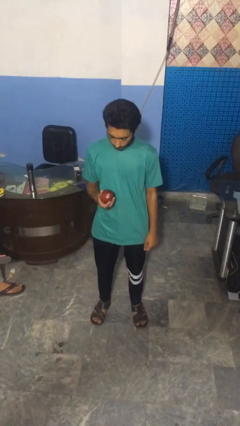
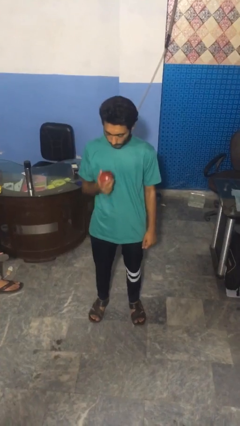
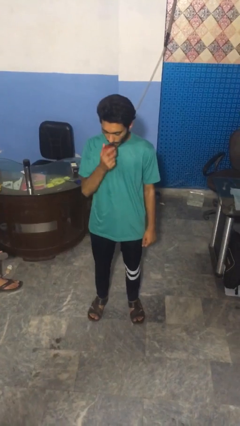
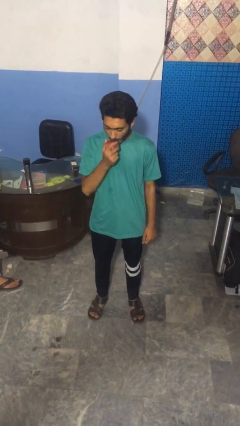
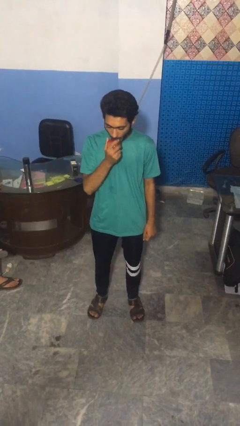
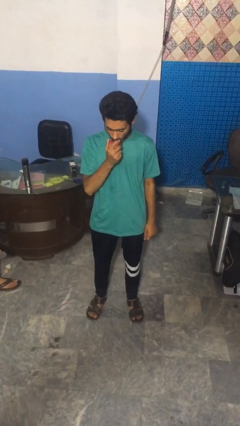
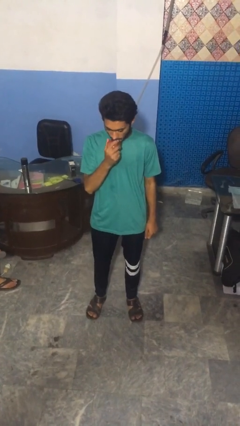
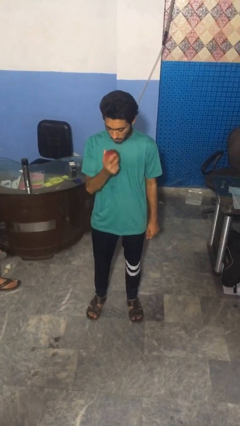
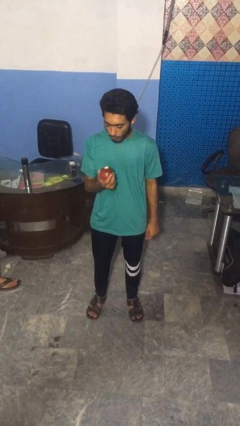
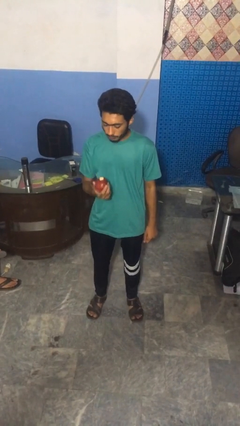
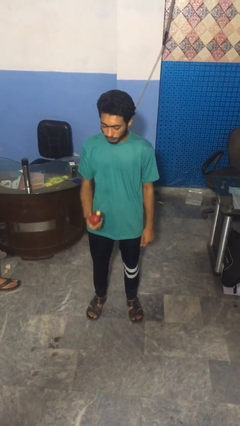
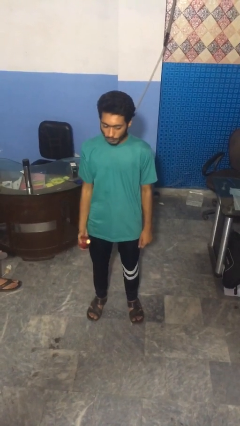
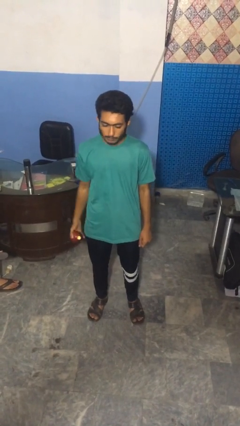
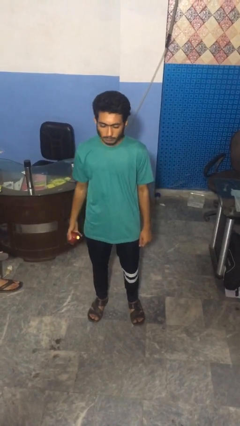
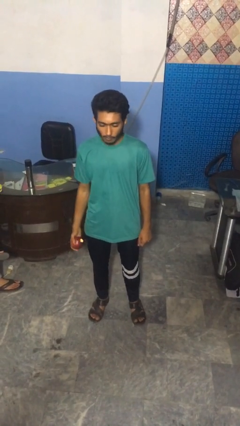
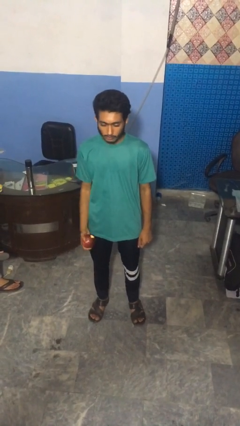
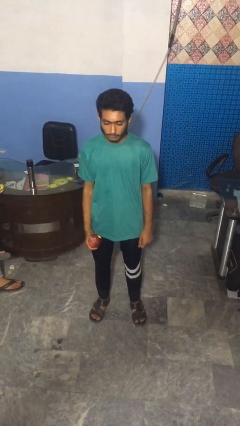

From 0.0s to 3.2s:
person eats apple

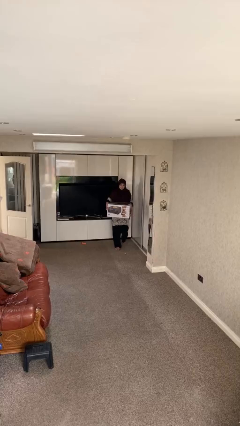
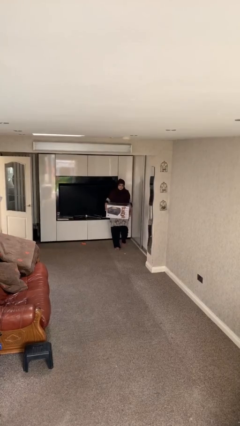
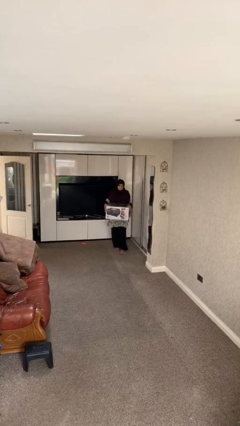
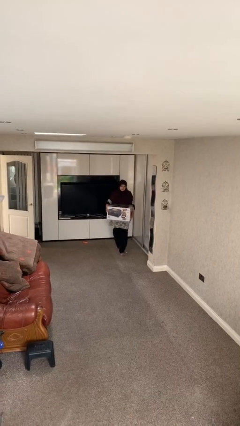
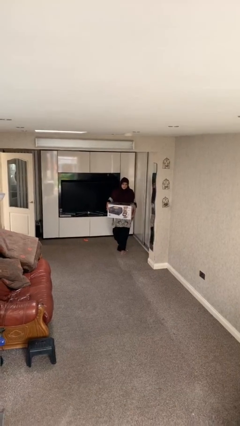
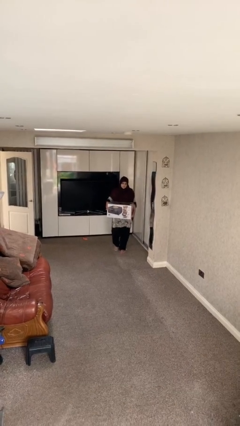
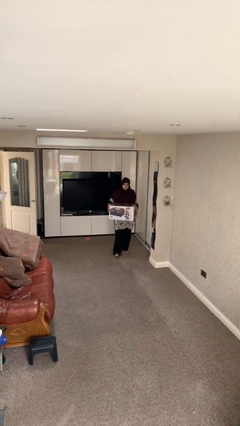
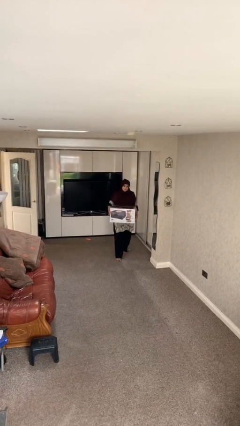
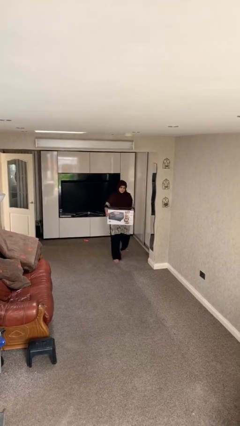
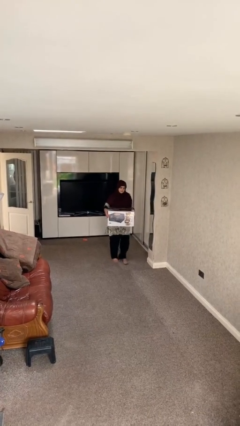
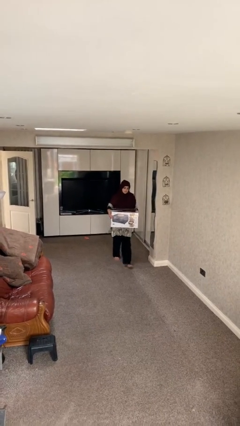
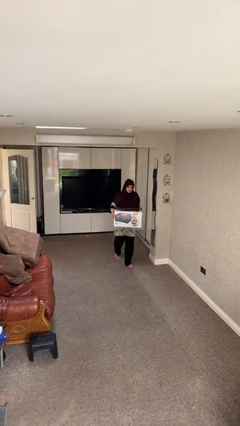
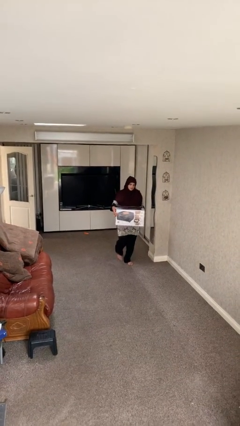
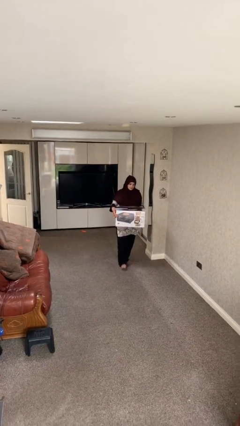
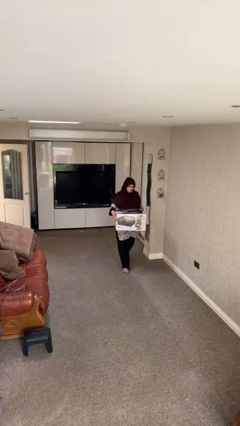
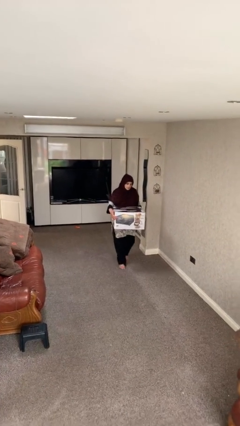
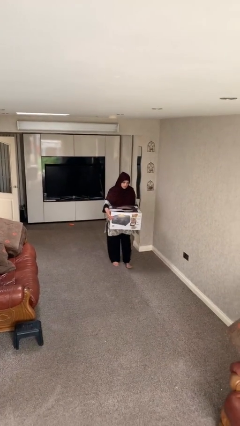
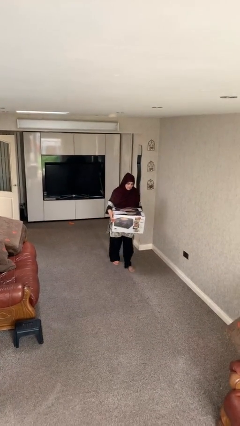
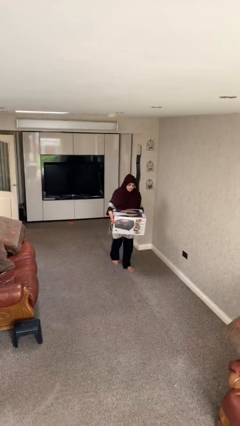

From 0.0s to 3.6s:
person carries heavy object

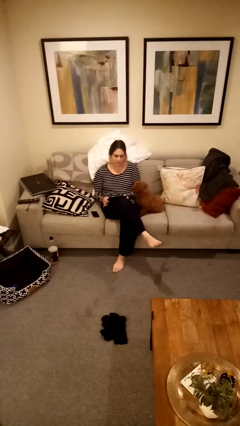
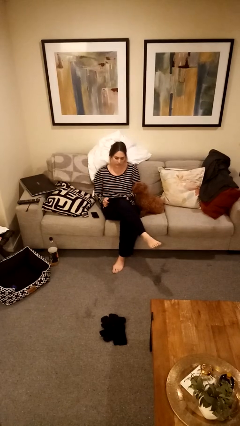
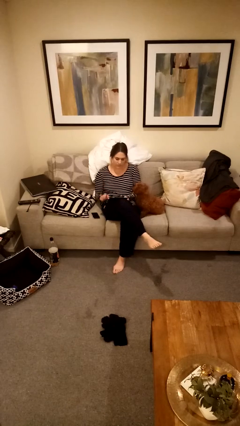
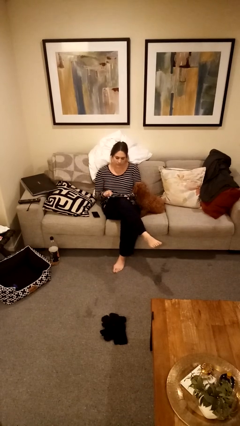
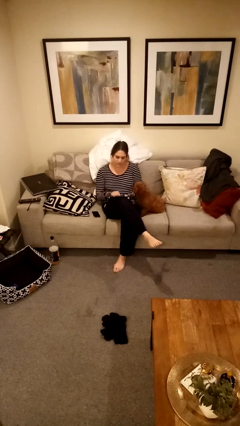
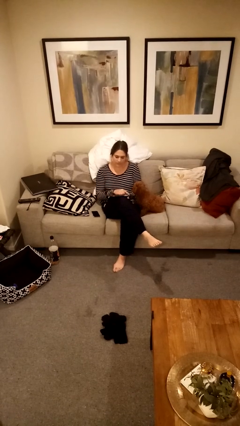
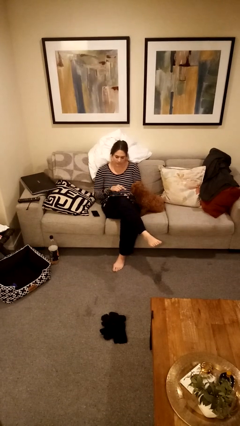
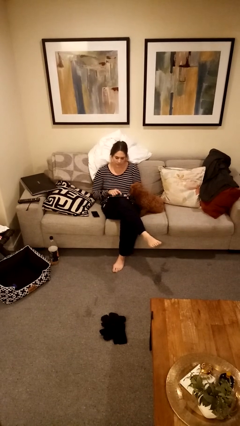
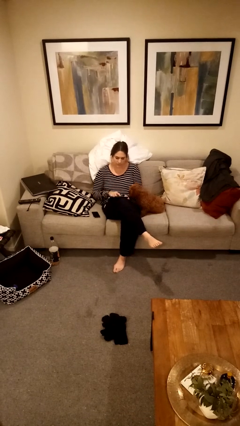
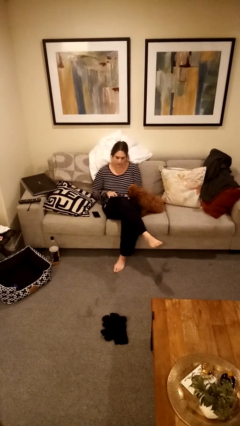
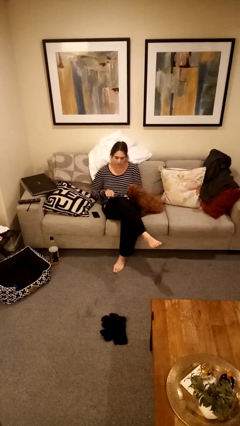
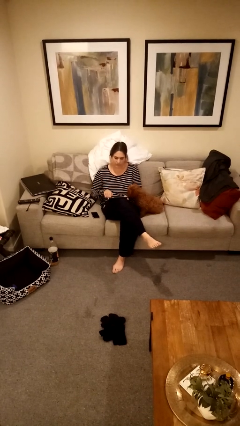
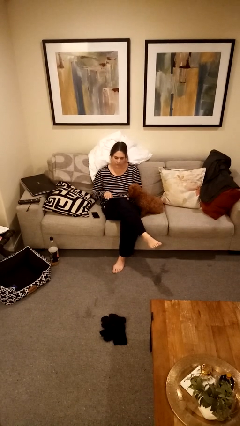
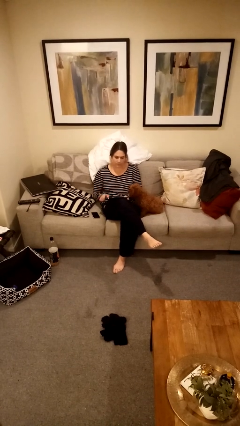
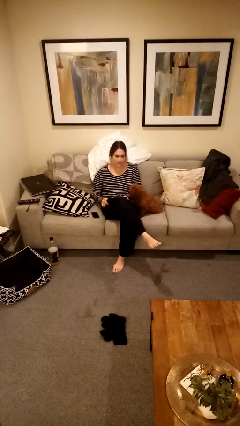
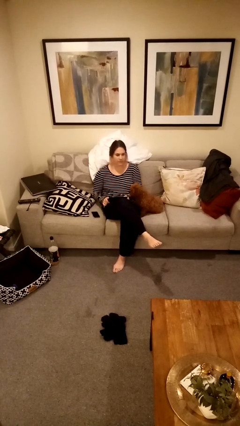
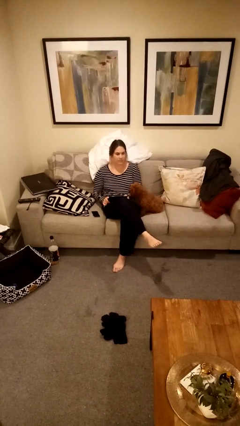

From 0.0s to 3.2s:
person interacts with tablet

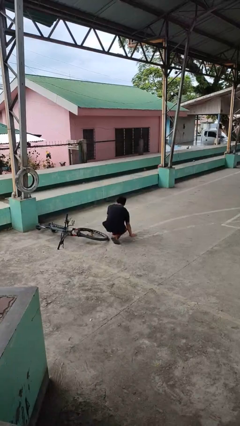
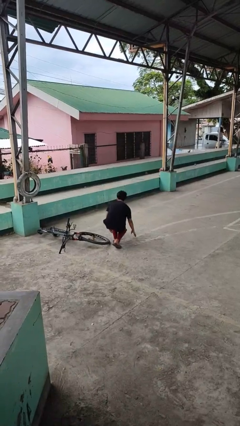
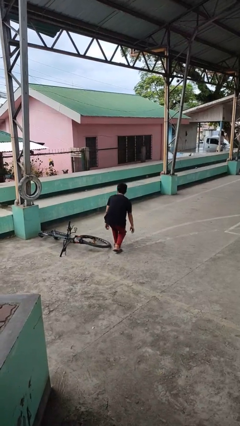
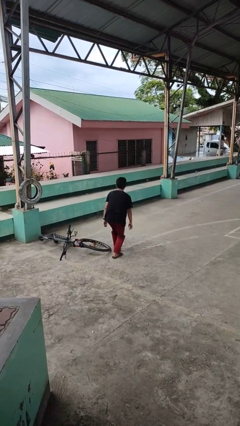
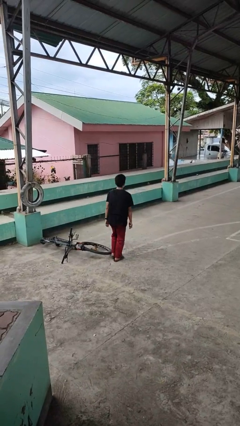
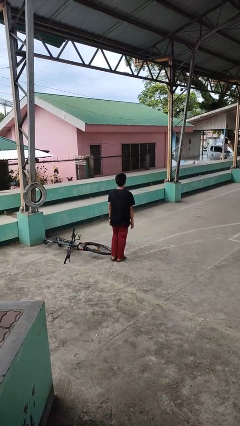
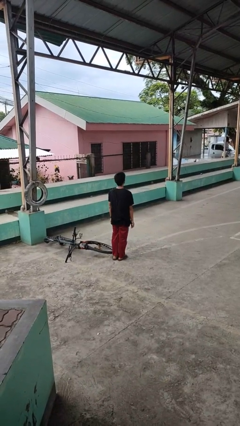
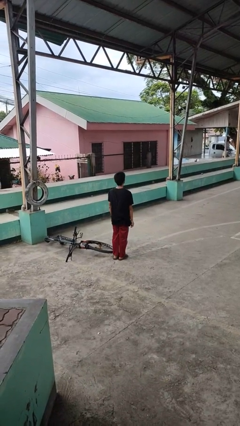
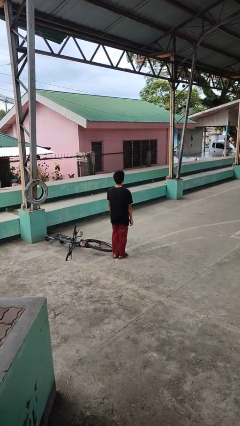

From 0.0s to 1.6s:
person picks up object from floor

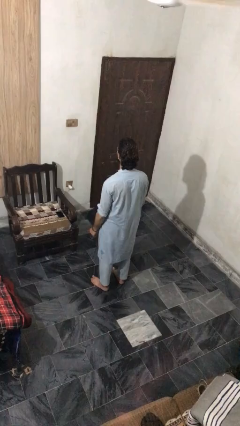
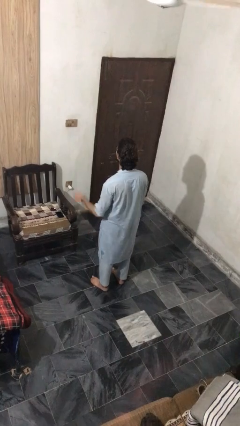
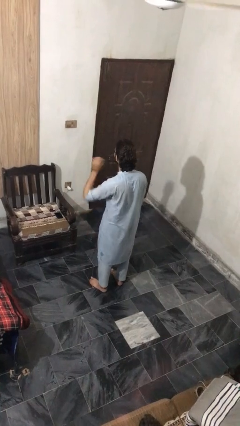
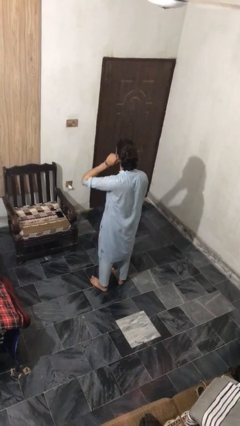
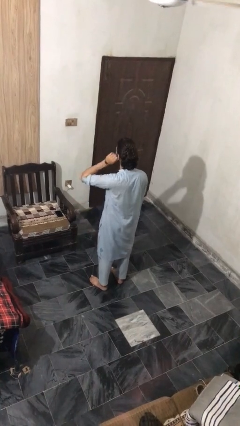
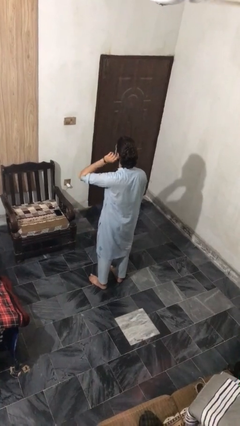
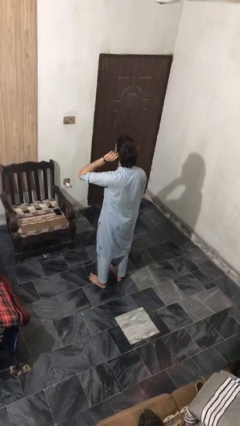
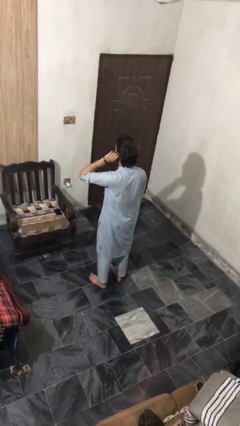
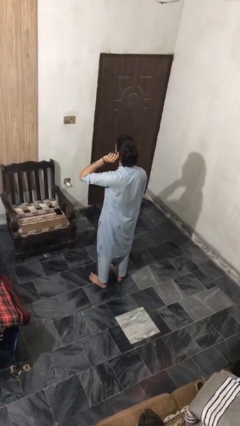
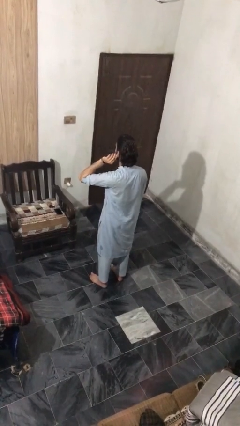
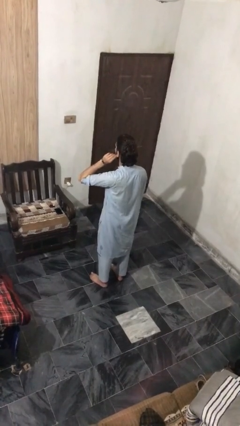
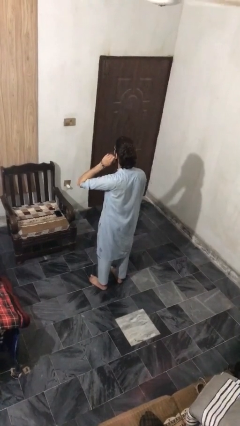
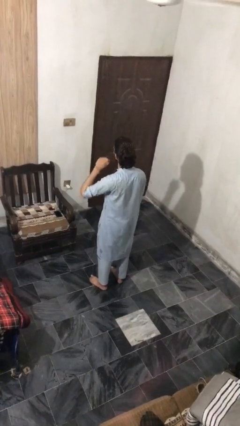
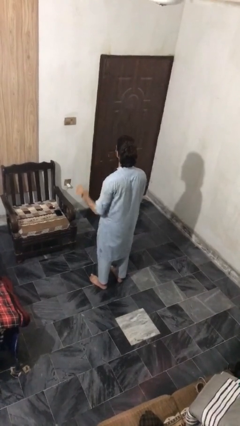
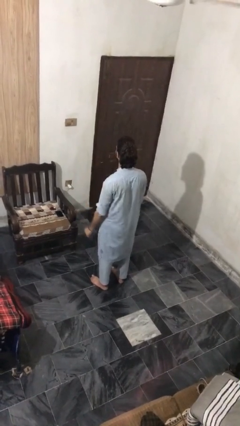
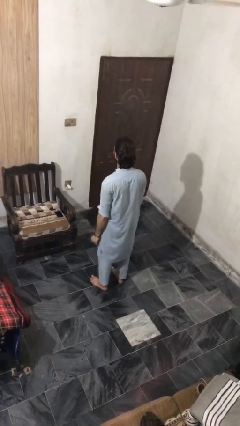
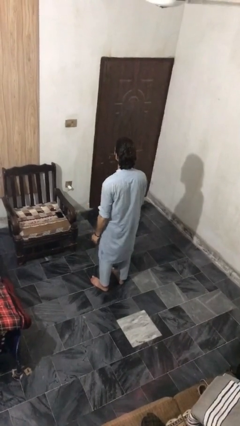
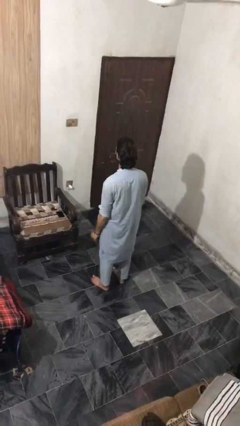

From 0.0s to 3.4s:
person touches earlobe

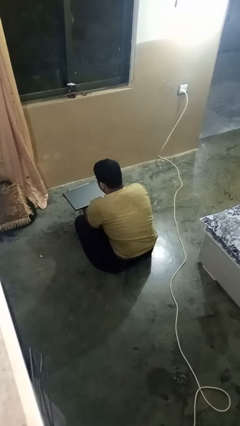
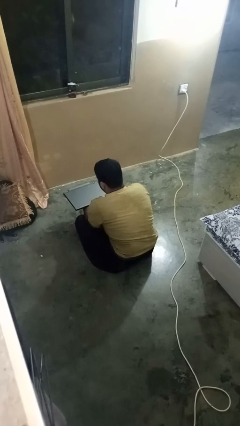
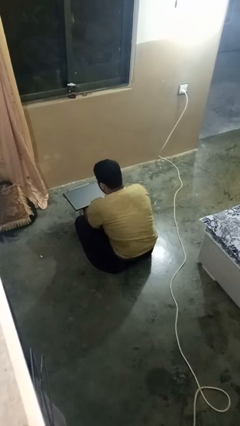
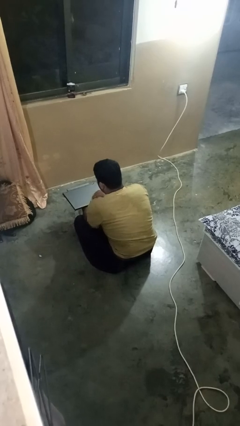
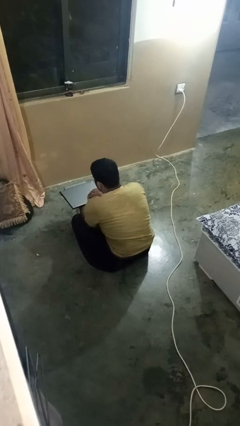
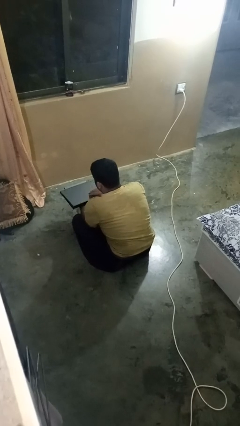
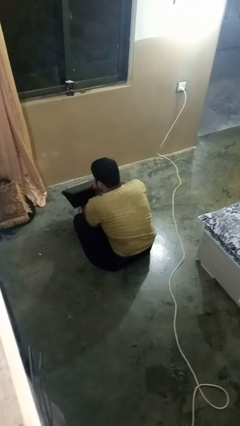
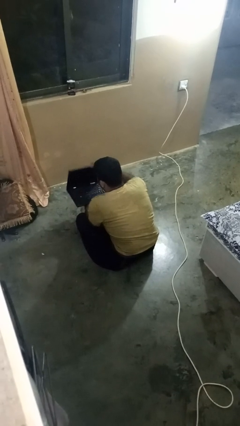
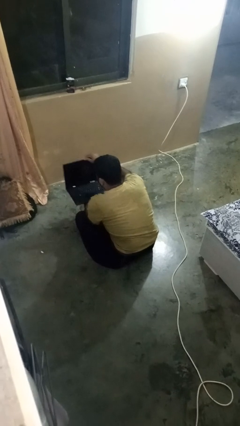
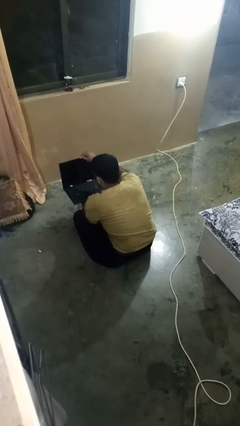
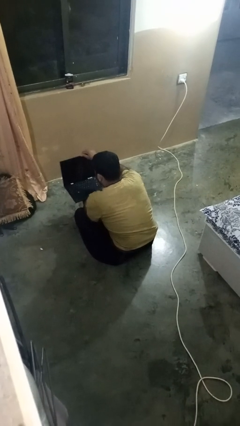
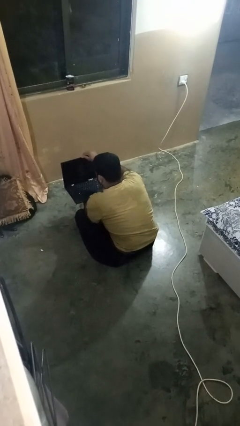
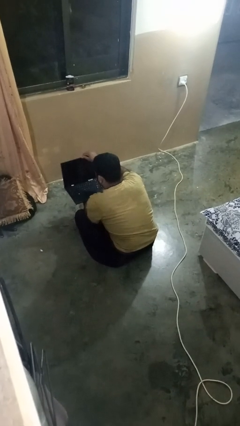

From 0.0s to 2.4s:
person opens laptop
